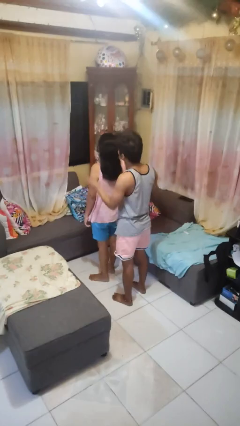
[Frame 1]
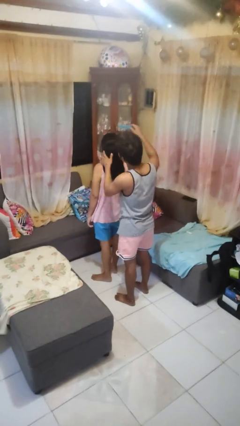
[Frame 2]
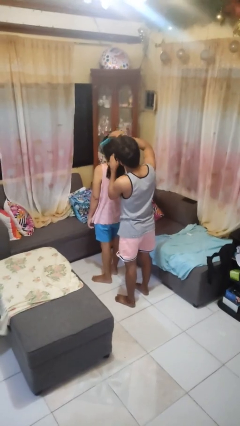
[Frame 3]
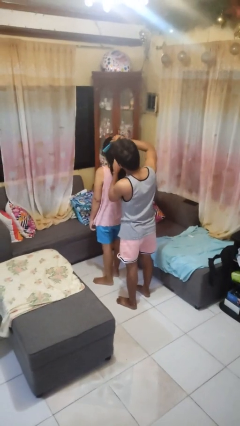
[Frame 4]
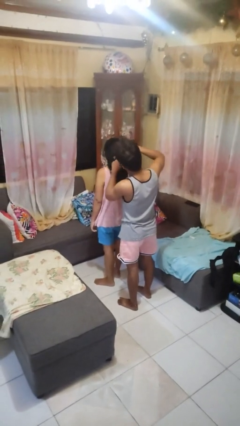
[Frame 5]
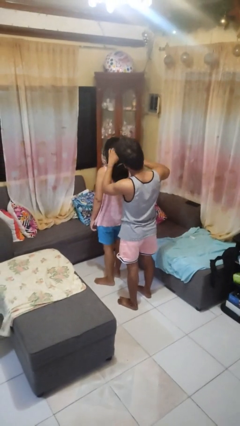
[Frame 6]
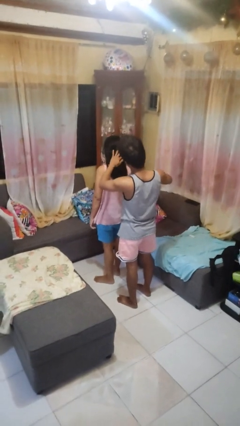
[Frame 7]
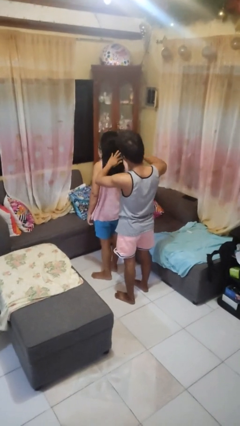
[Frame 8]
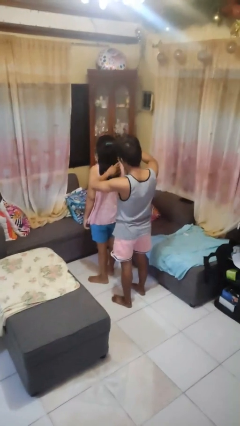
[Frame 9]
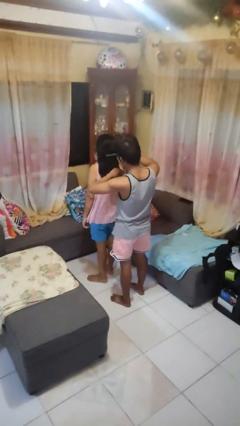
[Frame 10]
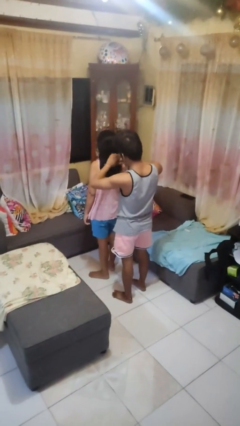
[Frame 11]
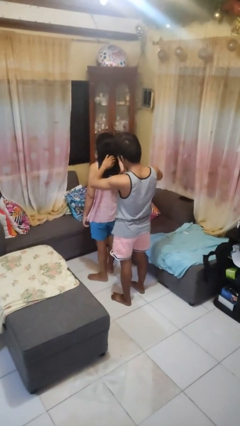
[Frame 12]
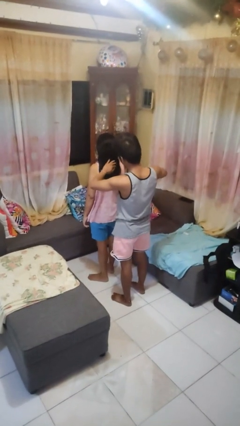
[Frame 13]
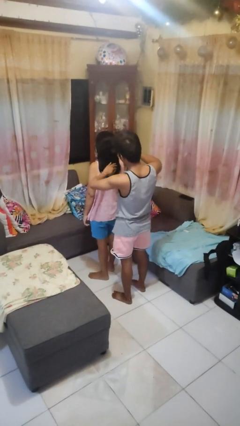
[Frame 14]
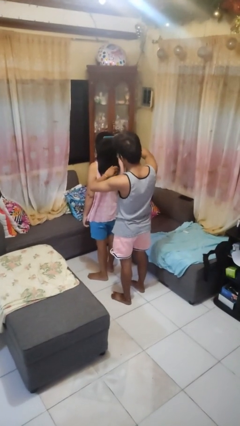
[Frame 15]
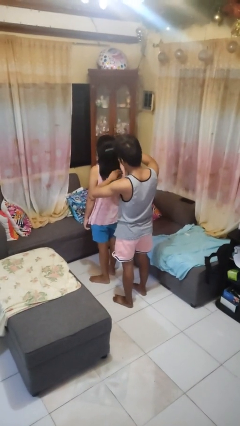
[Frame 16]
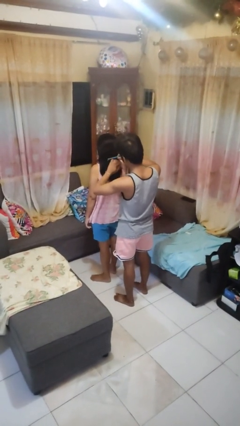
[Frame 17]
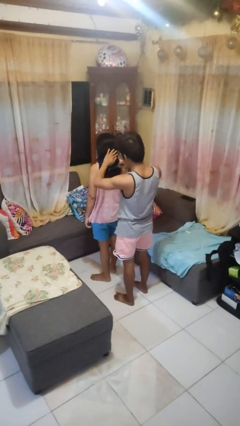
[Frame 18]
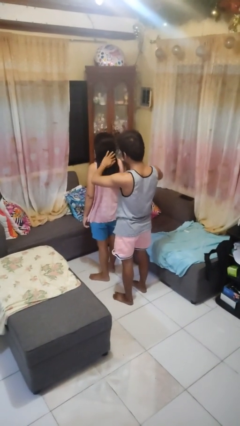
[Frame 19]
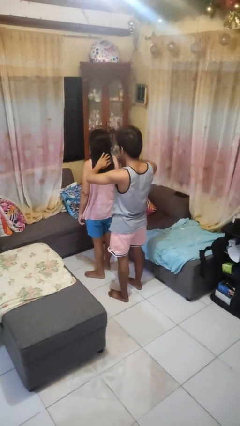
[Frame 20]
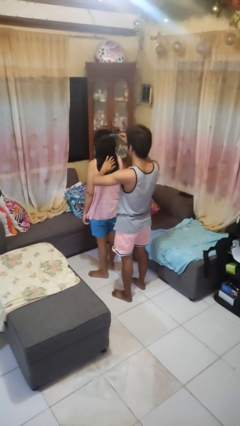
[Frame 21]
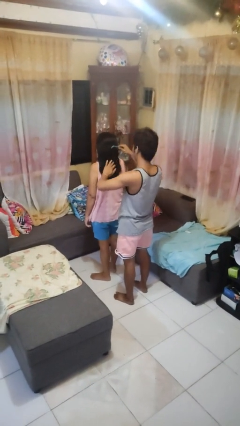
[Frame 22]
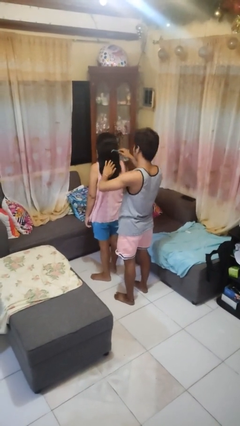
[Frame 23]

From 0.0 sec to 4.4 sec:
person brushes hair of person

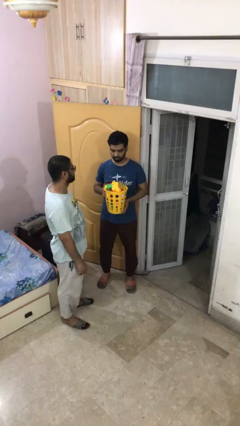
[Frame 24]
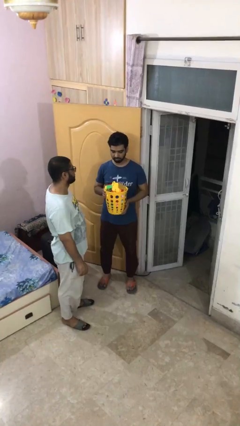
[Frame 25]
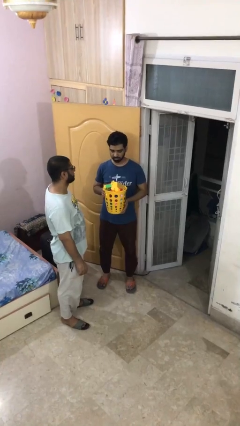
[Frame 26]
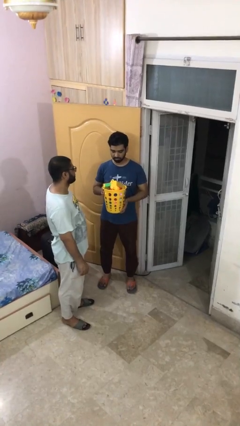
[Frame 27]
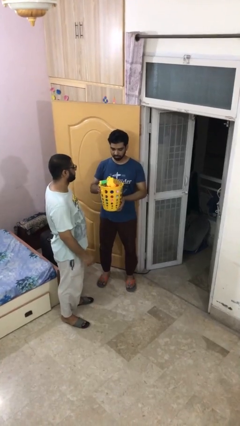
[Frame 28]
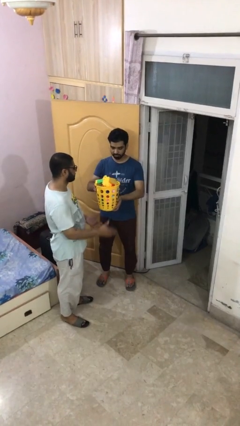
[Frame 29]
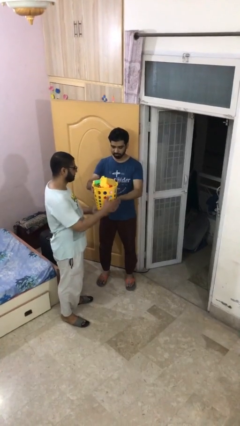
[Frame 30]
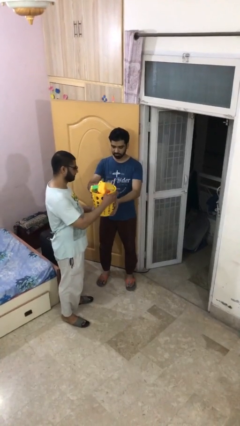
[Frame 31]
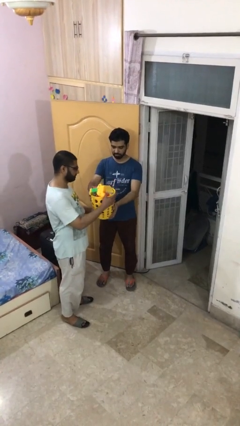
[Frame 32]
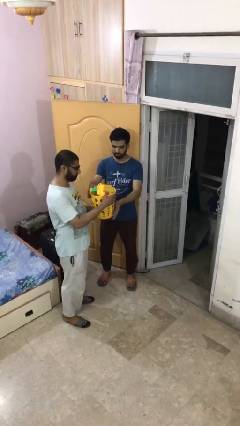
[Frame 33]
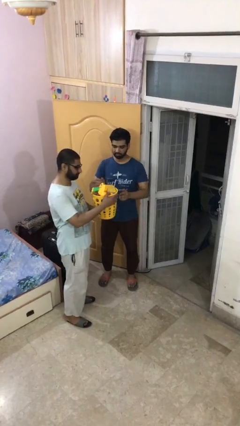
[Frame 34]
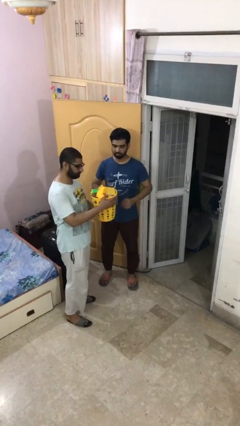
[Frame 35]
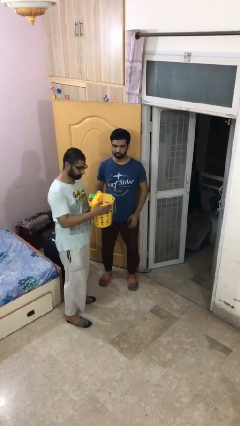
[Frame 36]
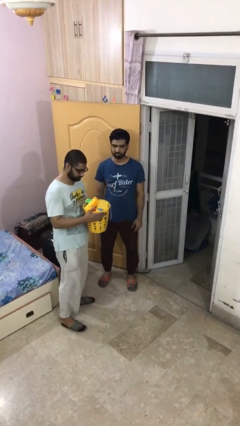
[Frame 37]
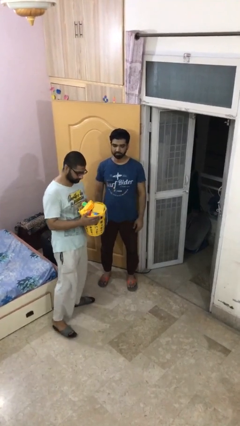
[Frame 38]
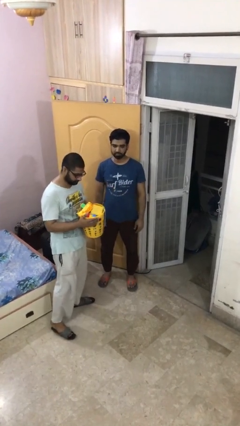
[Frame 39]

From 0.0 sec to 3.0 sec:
person transfers object to person

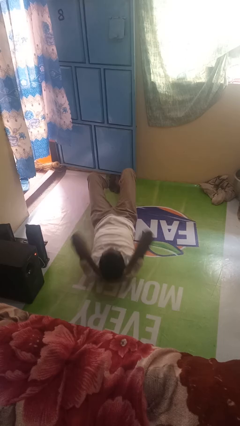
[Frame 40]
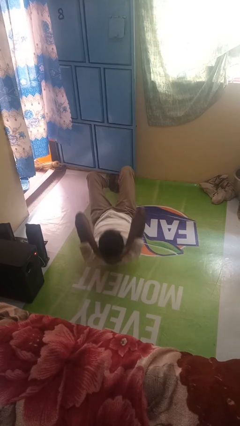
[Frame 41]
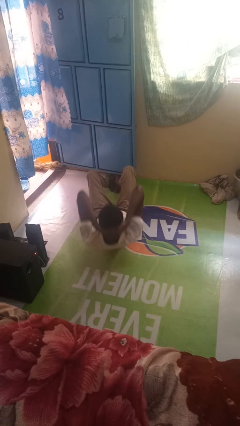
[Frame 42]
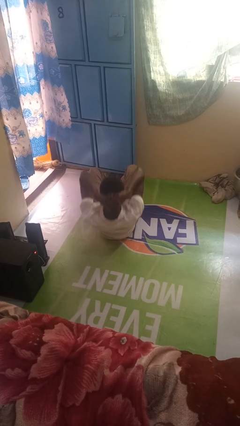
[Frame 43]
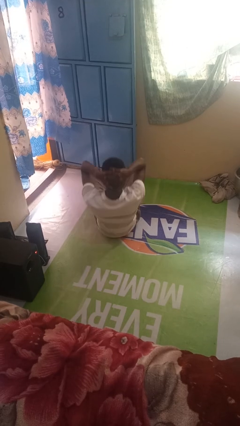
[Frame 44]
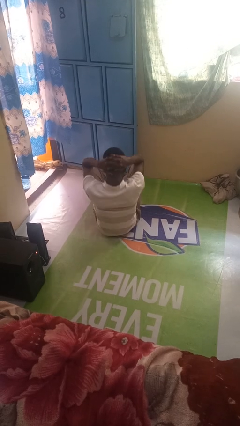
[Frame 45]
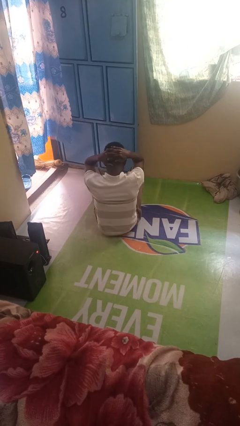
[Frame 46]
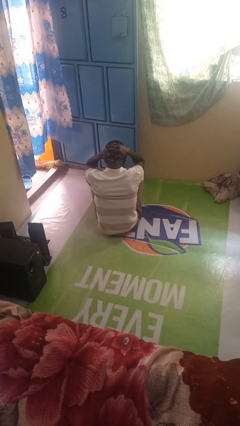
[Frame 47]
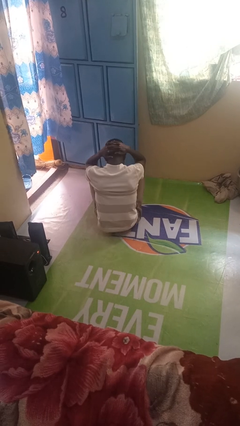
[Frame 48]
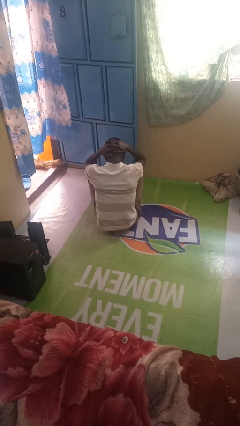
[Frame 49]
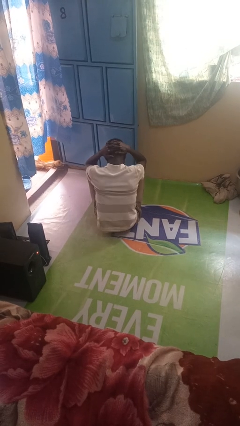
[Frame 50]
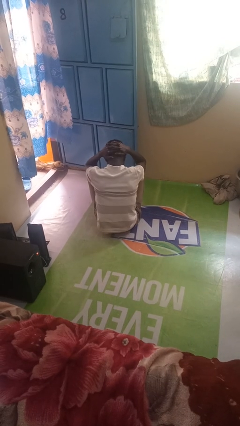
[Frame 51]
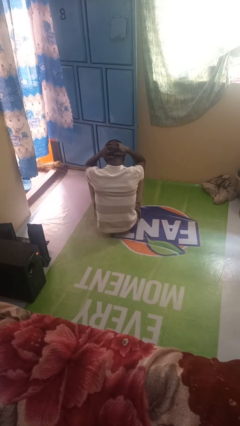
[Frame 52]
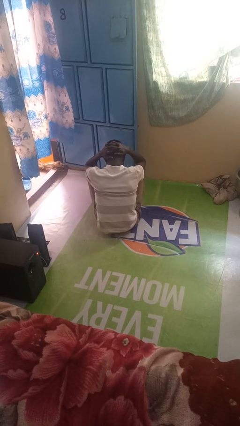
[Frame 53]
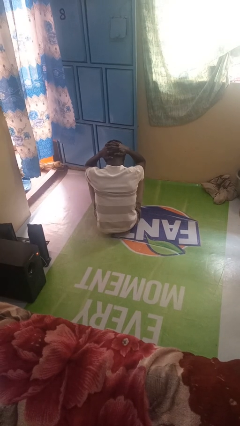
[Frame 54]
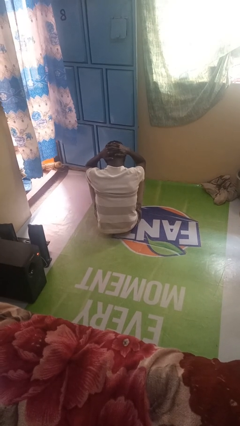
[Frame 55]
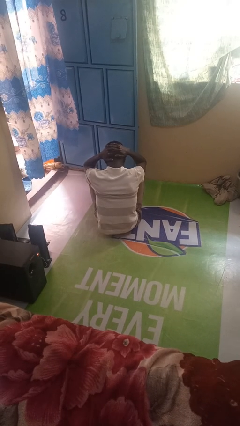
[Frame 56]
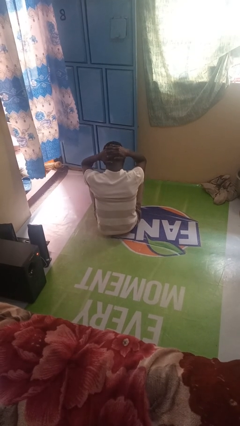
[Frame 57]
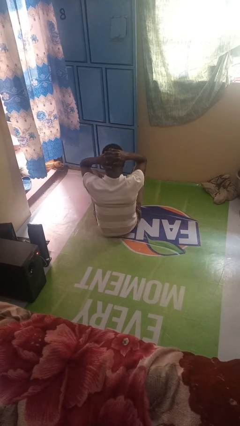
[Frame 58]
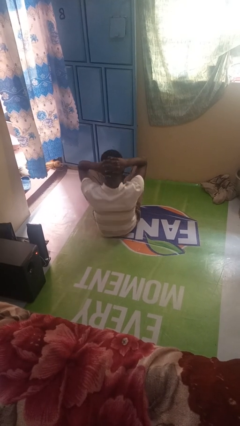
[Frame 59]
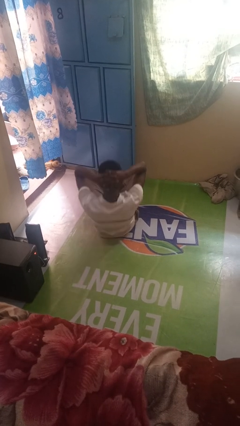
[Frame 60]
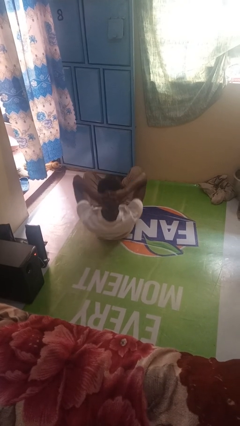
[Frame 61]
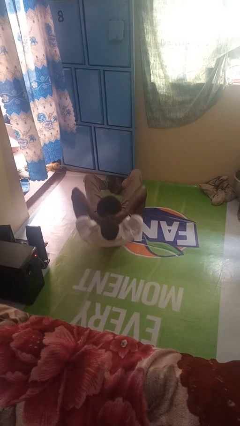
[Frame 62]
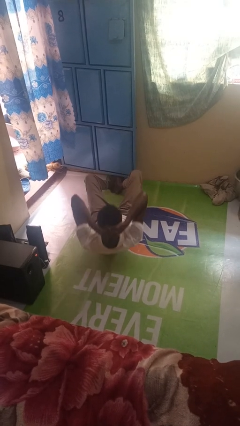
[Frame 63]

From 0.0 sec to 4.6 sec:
person exercises with situp

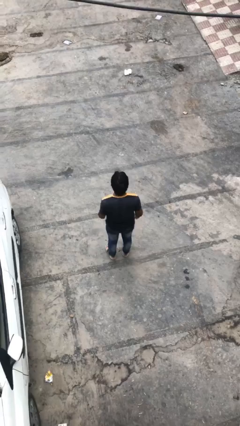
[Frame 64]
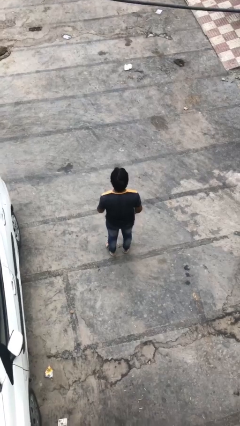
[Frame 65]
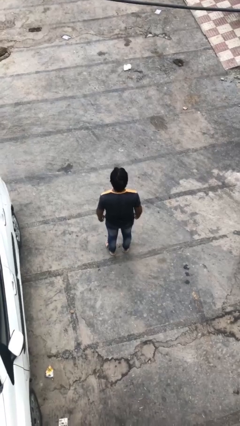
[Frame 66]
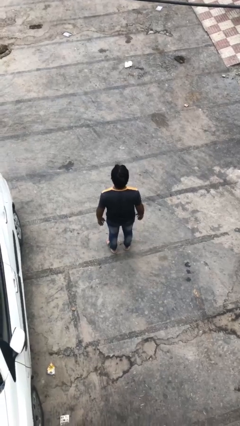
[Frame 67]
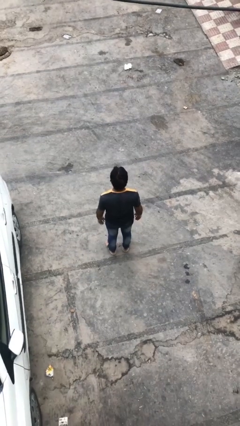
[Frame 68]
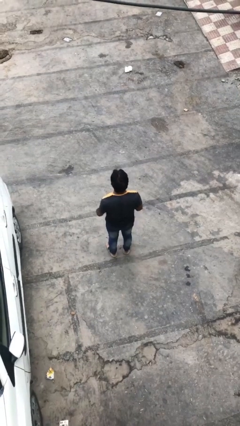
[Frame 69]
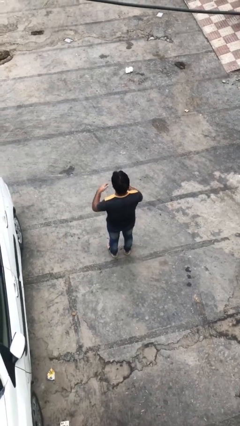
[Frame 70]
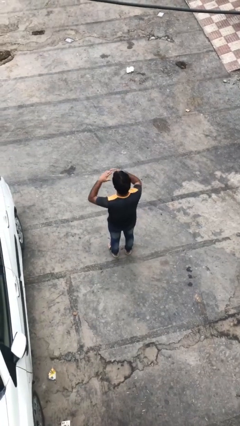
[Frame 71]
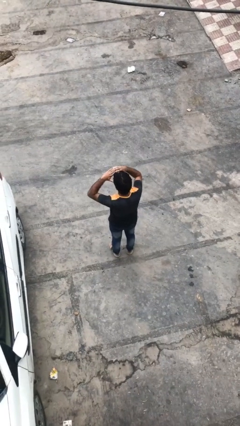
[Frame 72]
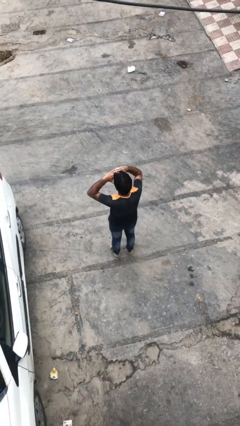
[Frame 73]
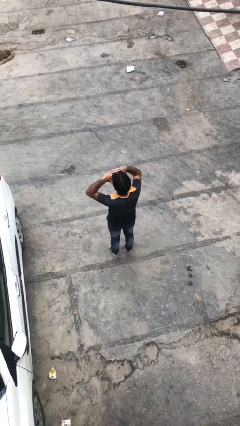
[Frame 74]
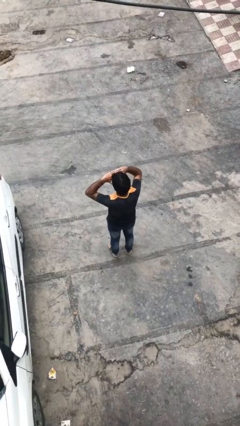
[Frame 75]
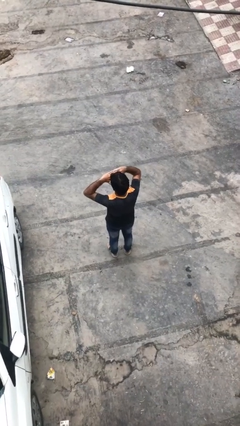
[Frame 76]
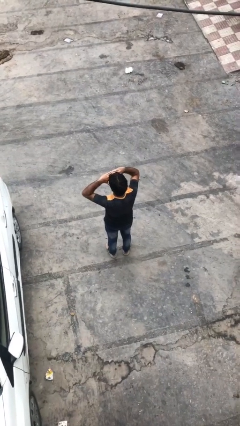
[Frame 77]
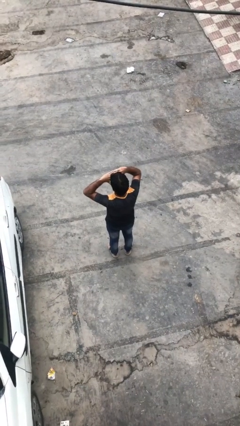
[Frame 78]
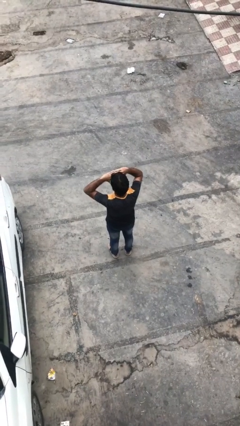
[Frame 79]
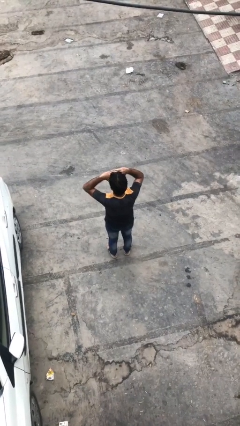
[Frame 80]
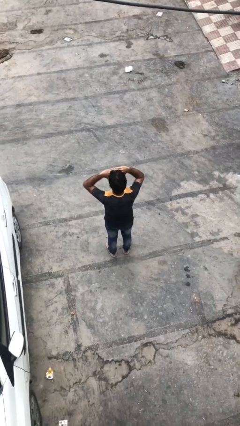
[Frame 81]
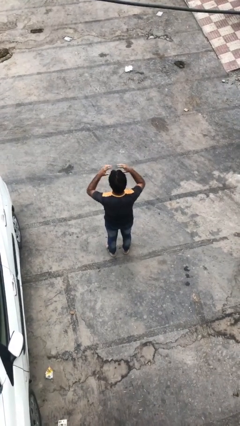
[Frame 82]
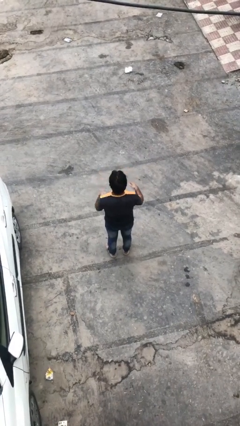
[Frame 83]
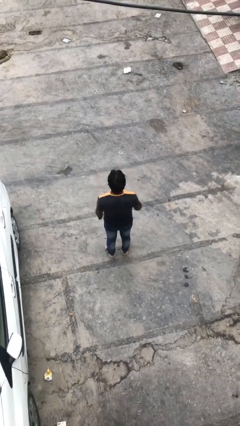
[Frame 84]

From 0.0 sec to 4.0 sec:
person shades eyes

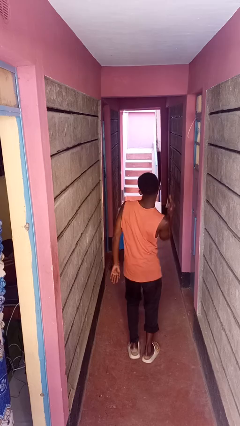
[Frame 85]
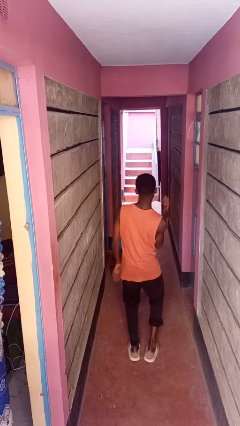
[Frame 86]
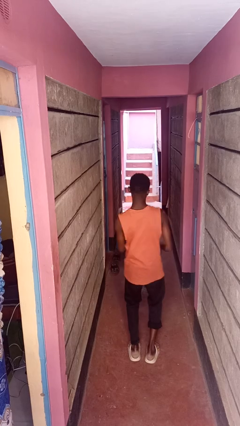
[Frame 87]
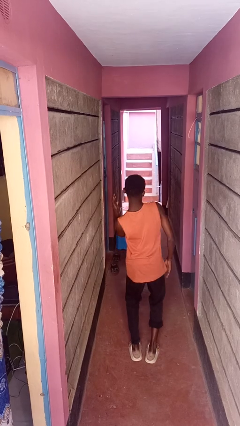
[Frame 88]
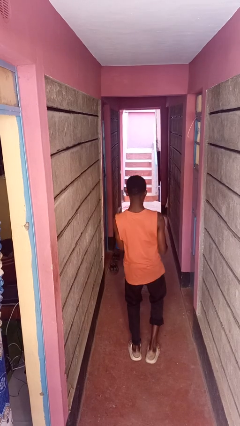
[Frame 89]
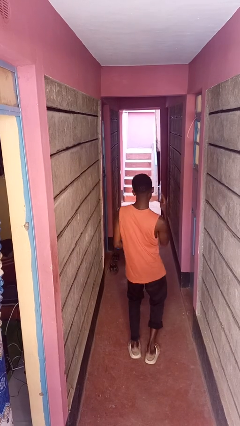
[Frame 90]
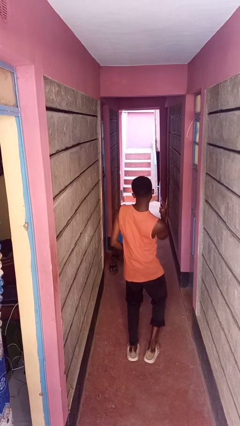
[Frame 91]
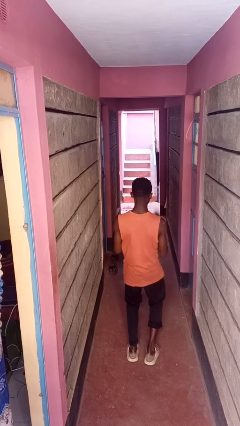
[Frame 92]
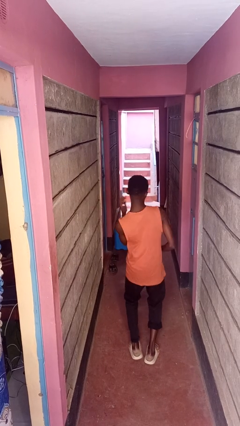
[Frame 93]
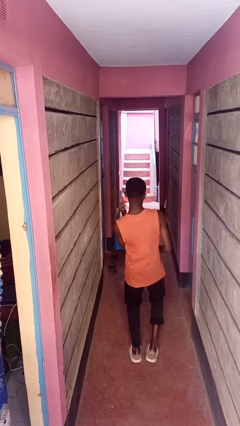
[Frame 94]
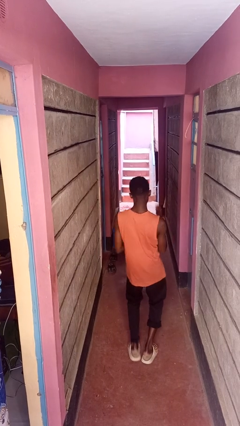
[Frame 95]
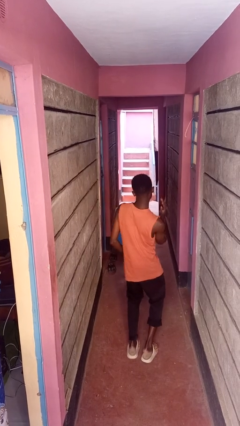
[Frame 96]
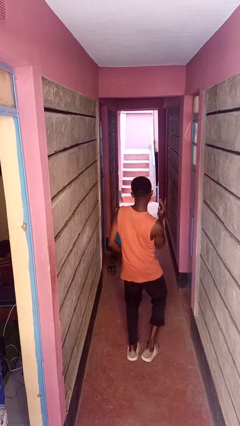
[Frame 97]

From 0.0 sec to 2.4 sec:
person dances in place
